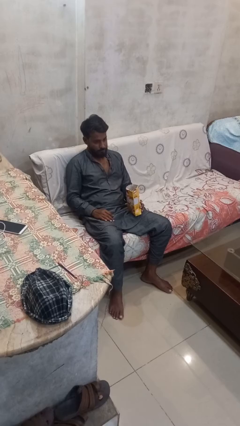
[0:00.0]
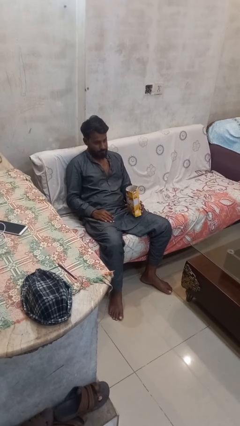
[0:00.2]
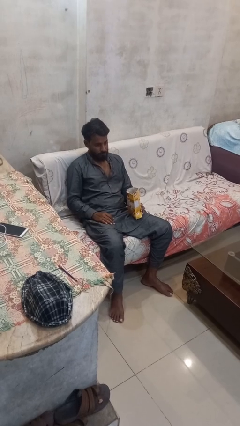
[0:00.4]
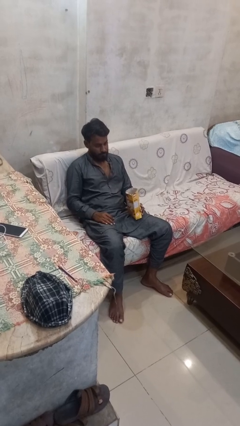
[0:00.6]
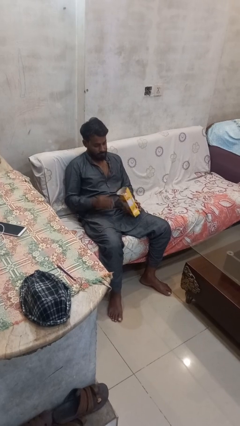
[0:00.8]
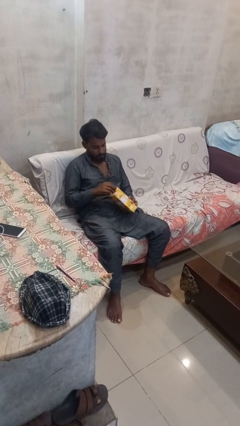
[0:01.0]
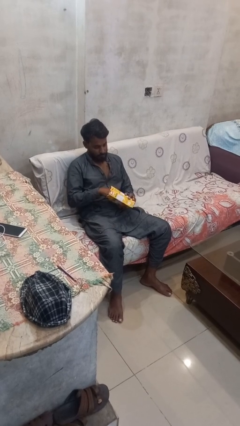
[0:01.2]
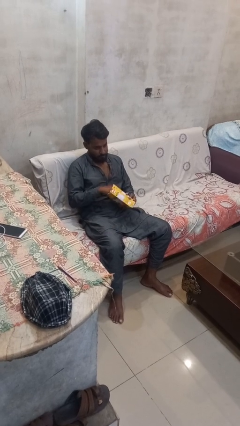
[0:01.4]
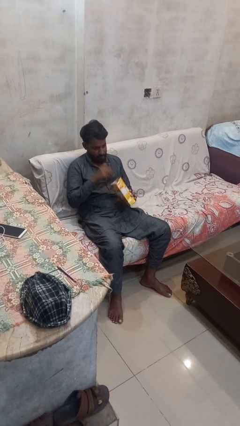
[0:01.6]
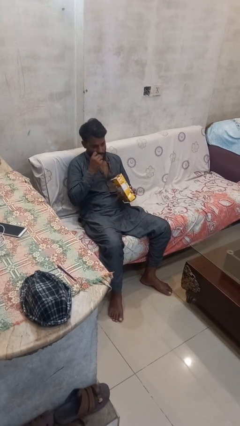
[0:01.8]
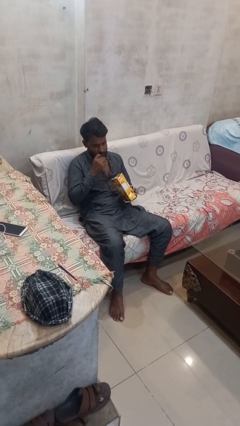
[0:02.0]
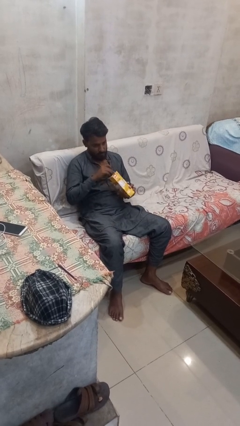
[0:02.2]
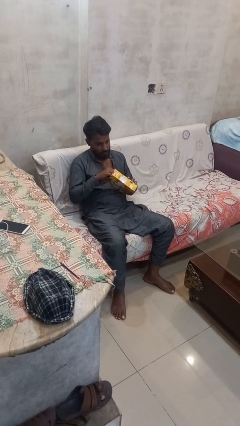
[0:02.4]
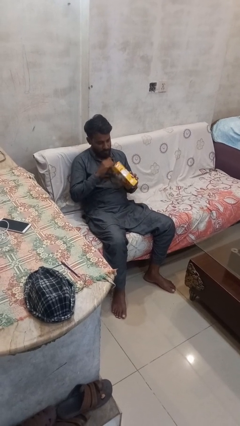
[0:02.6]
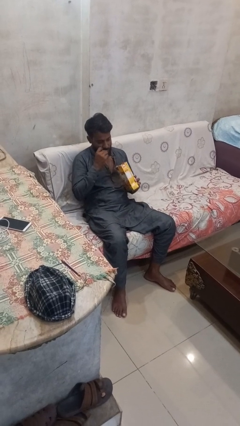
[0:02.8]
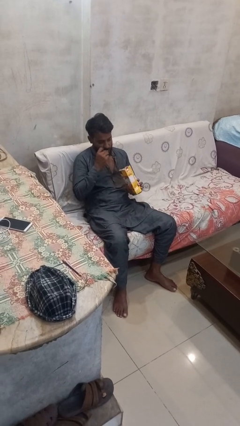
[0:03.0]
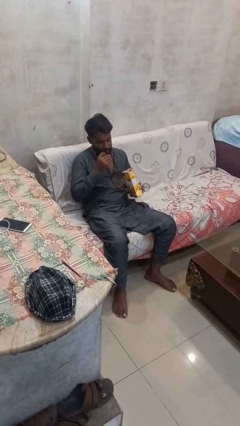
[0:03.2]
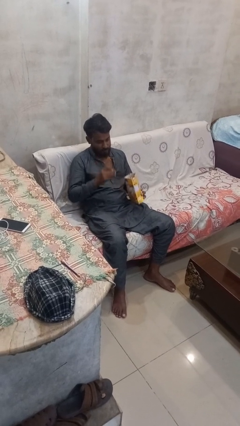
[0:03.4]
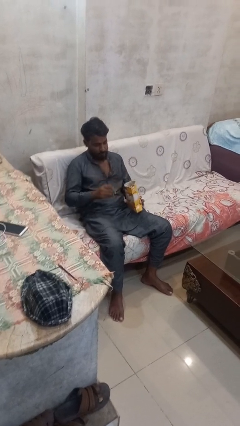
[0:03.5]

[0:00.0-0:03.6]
person eats snack from bag

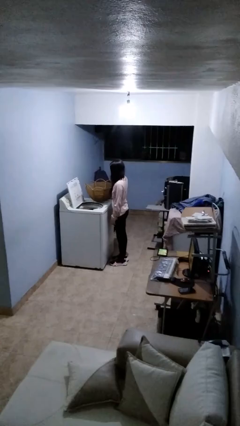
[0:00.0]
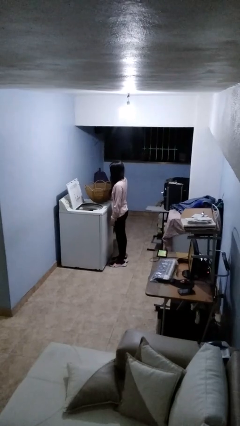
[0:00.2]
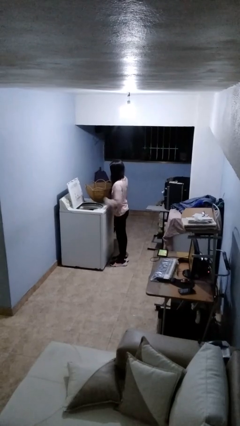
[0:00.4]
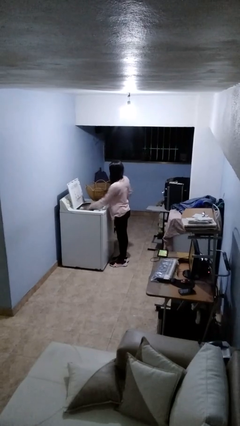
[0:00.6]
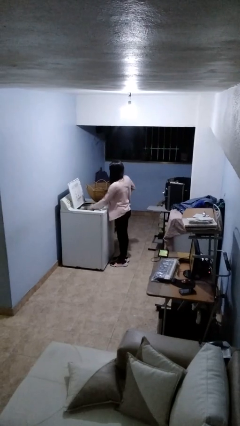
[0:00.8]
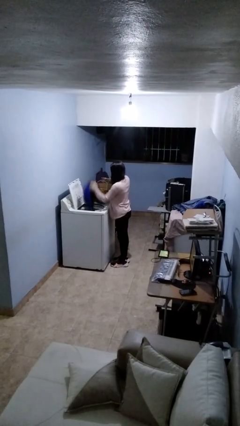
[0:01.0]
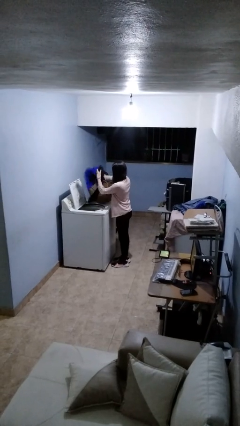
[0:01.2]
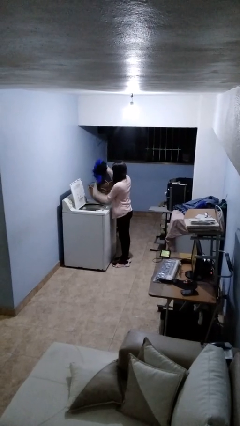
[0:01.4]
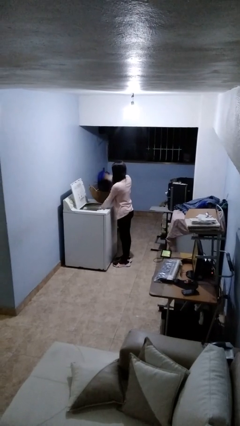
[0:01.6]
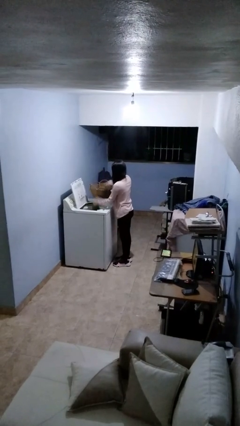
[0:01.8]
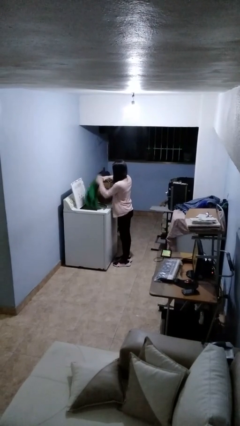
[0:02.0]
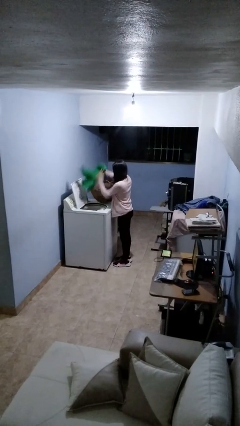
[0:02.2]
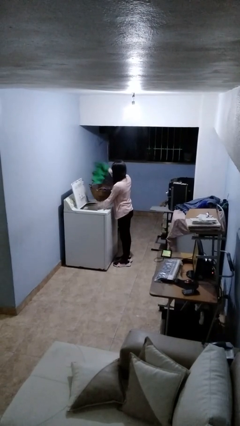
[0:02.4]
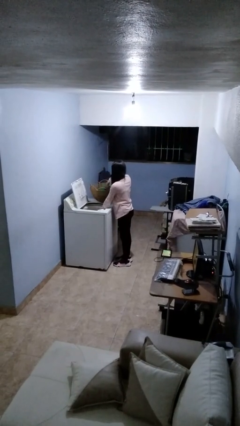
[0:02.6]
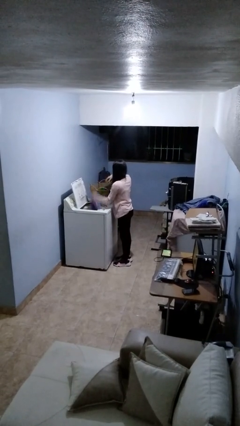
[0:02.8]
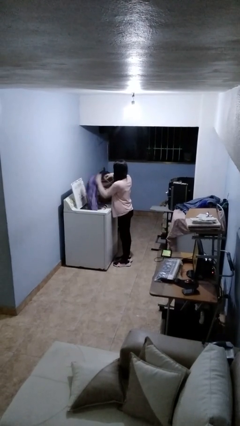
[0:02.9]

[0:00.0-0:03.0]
person loads clotheswasher

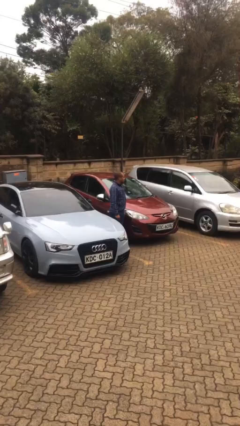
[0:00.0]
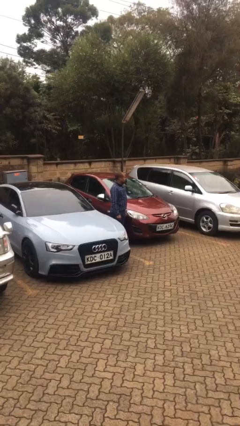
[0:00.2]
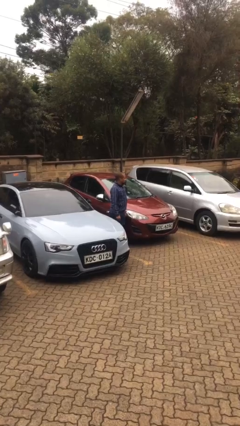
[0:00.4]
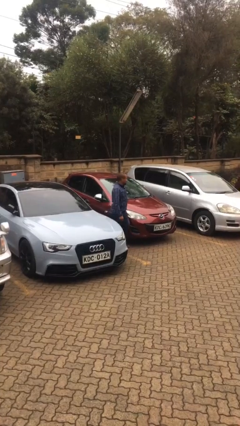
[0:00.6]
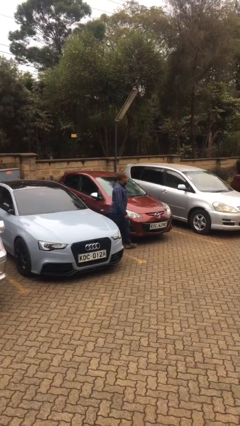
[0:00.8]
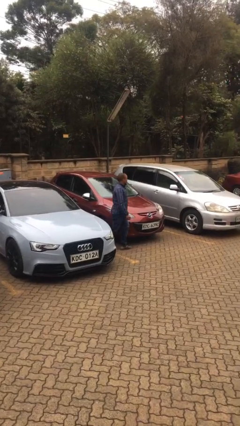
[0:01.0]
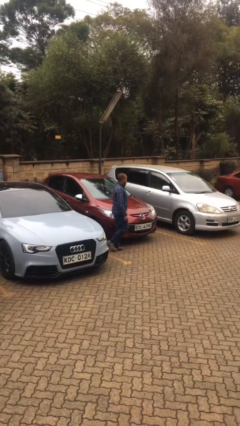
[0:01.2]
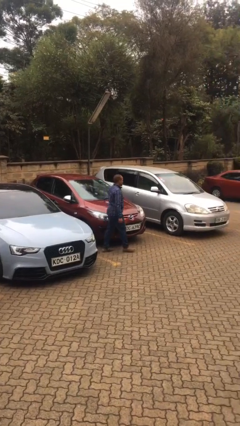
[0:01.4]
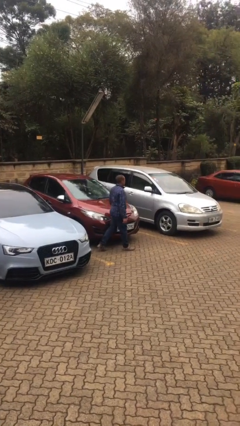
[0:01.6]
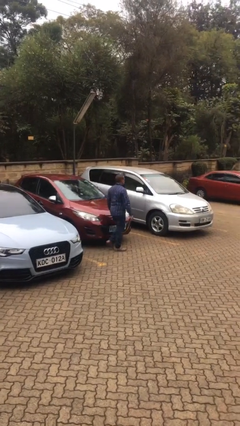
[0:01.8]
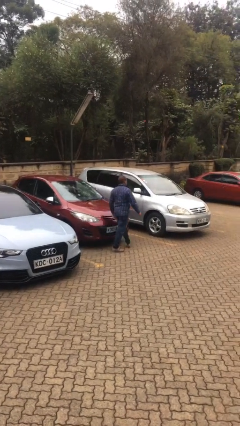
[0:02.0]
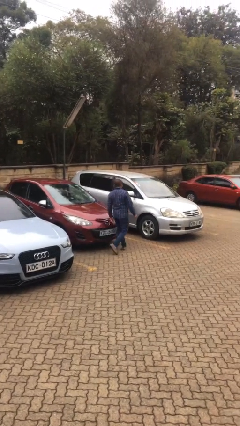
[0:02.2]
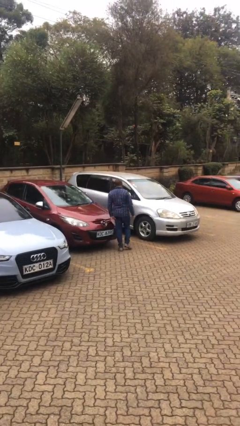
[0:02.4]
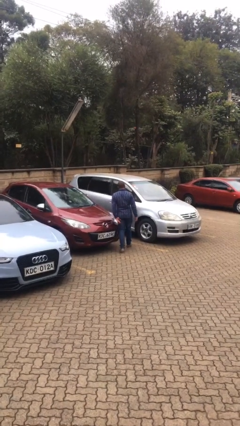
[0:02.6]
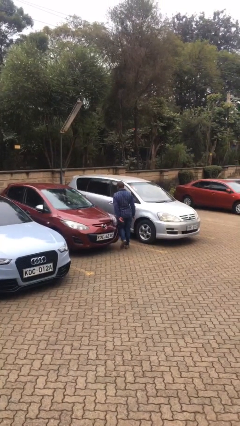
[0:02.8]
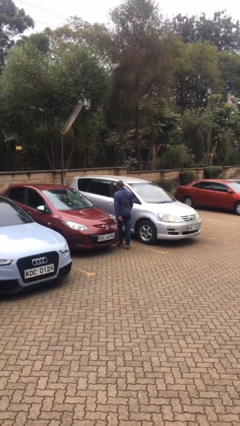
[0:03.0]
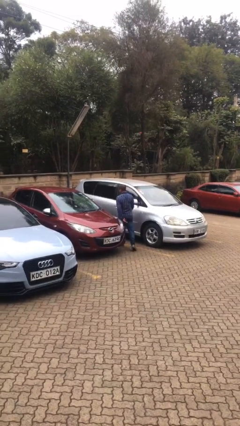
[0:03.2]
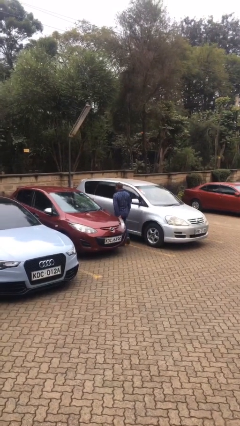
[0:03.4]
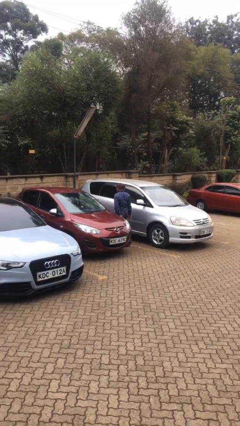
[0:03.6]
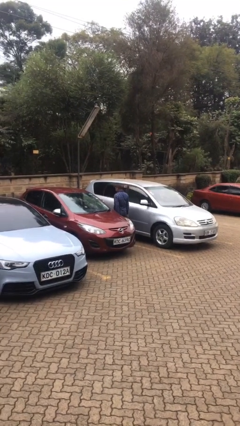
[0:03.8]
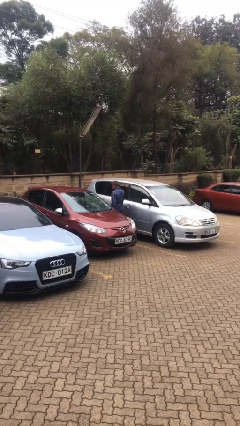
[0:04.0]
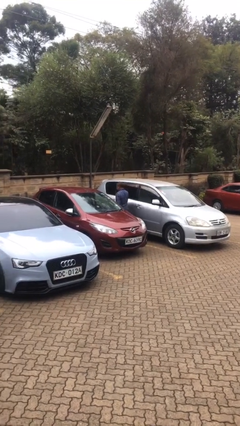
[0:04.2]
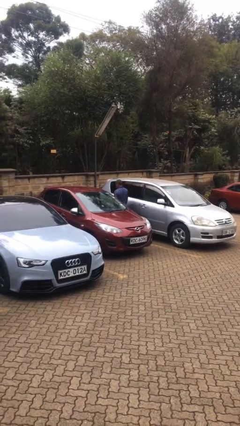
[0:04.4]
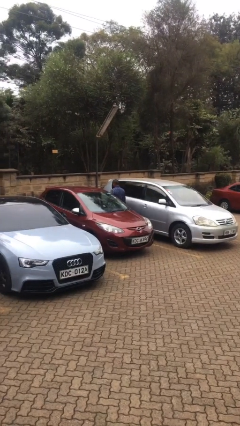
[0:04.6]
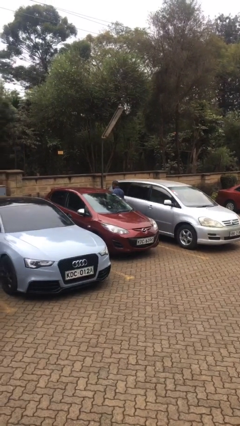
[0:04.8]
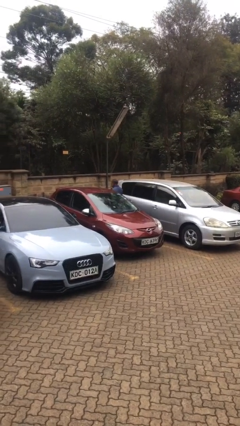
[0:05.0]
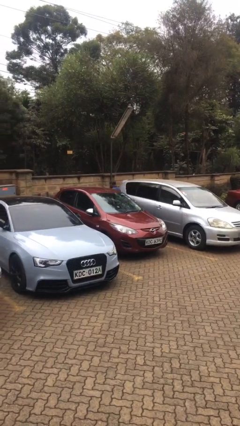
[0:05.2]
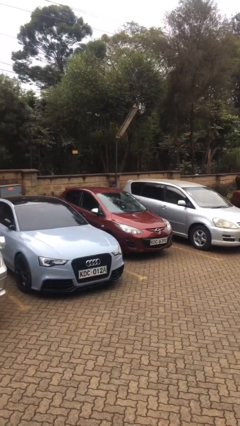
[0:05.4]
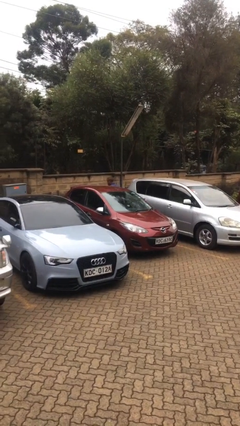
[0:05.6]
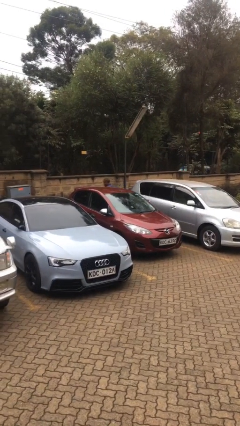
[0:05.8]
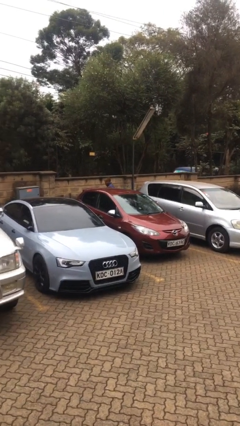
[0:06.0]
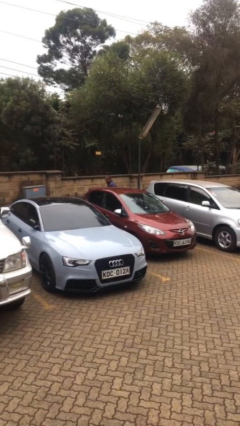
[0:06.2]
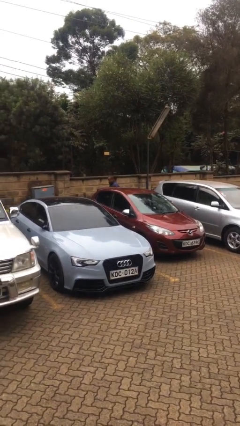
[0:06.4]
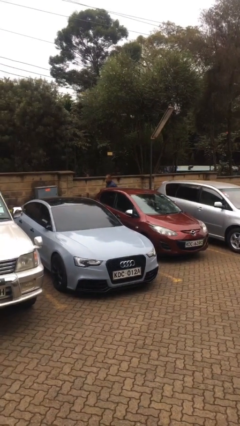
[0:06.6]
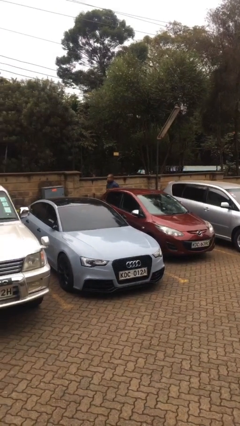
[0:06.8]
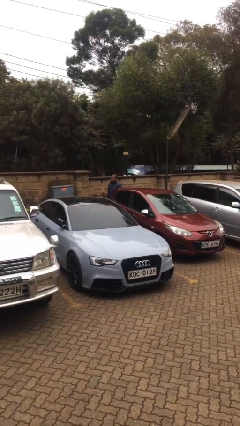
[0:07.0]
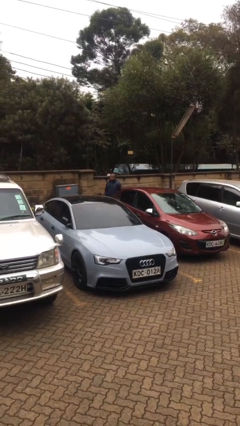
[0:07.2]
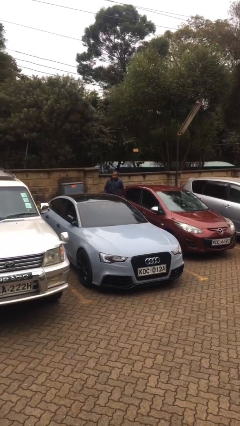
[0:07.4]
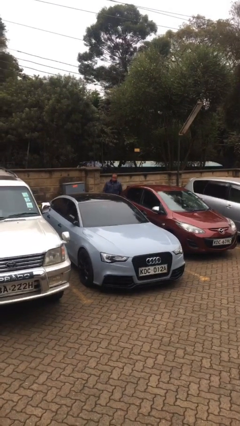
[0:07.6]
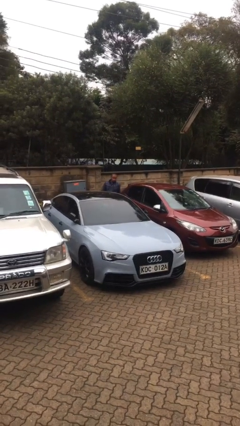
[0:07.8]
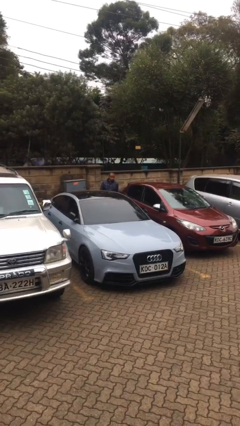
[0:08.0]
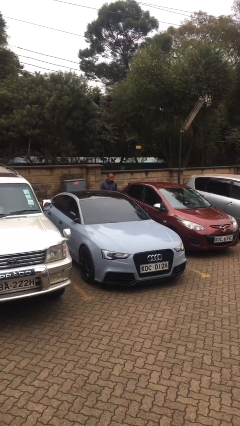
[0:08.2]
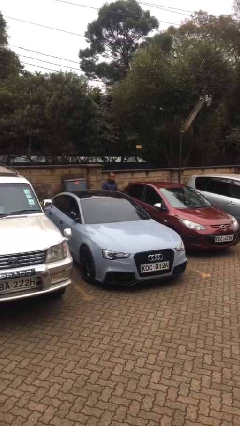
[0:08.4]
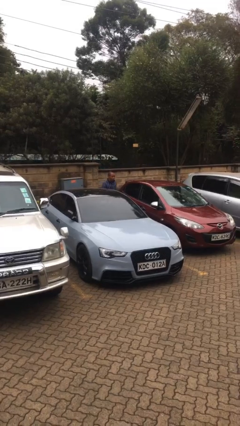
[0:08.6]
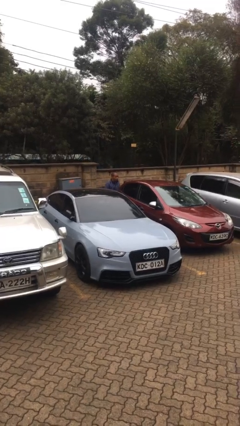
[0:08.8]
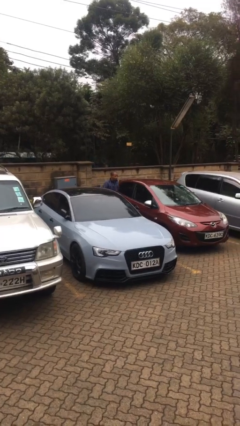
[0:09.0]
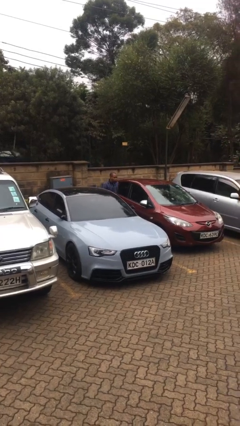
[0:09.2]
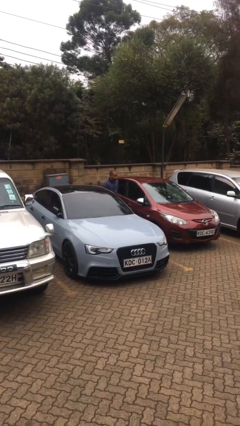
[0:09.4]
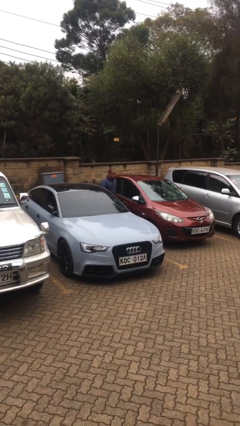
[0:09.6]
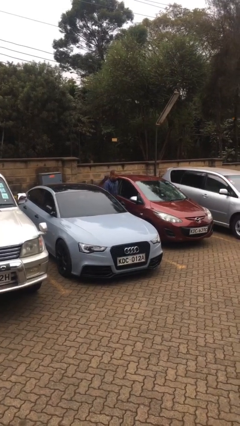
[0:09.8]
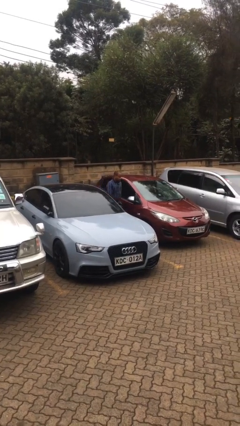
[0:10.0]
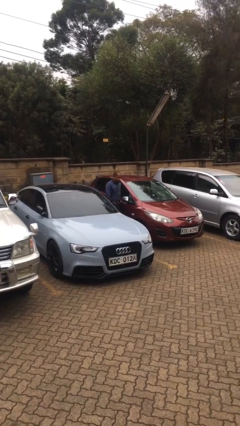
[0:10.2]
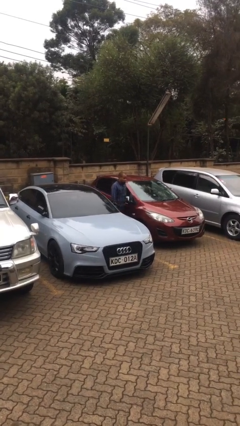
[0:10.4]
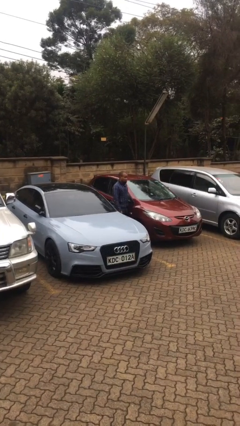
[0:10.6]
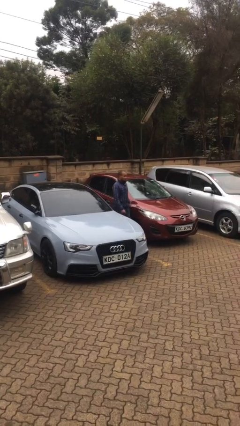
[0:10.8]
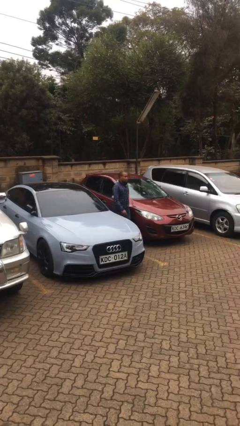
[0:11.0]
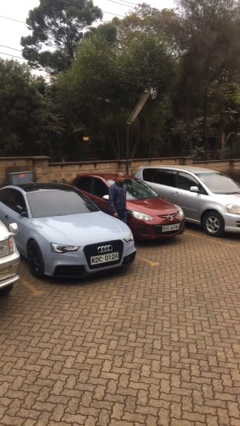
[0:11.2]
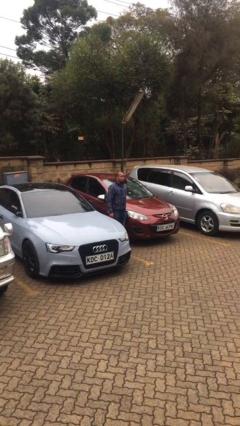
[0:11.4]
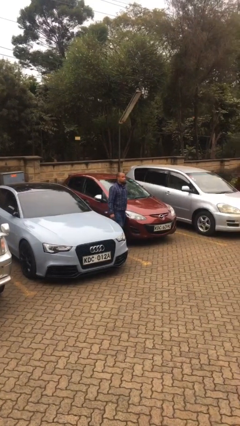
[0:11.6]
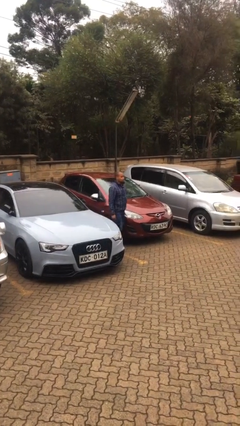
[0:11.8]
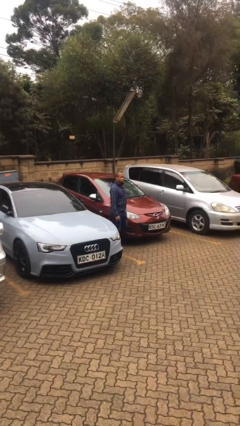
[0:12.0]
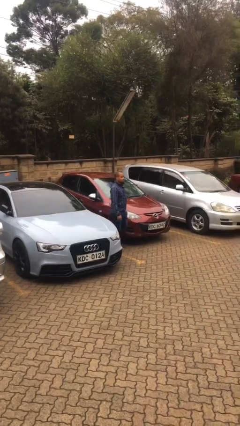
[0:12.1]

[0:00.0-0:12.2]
person walks around car
